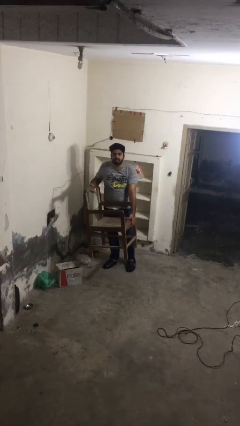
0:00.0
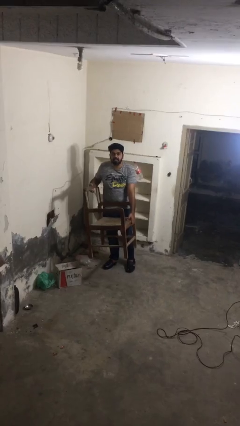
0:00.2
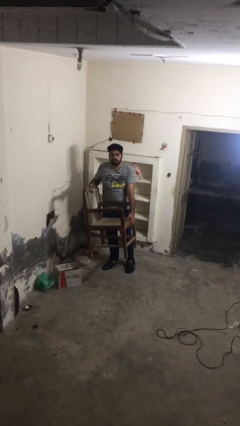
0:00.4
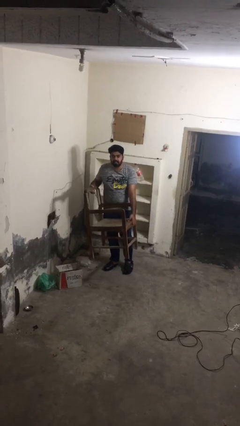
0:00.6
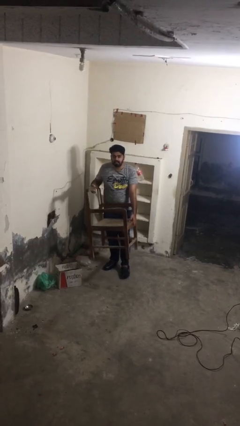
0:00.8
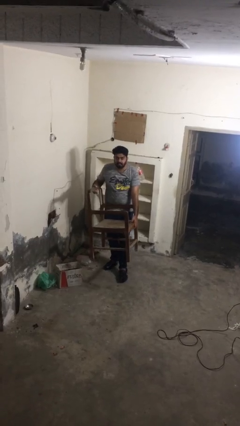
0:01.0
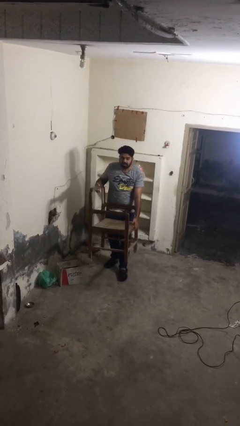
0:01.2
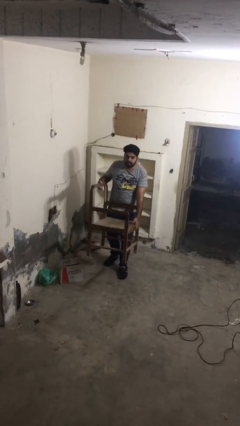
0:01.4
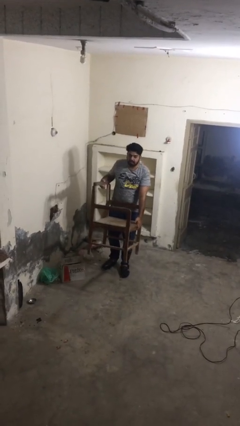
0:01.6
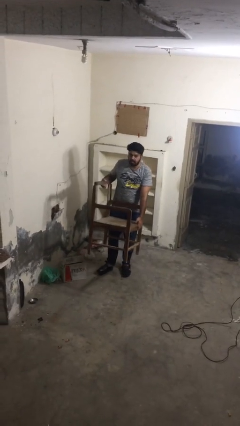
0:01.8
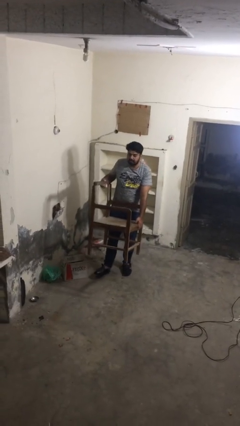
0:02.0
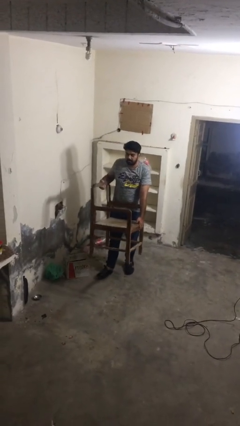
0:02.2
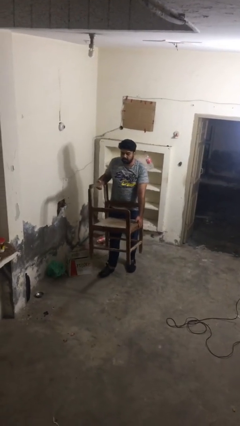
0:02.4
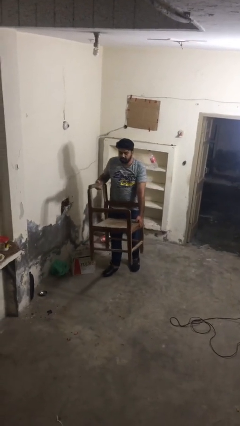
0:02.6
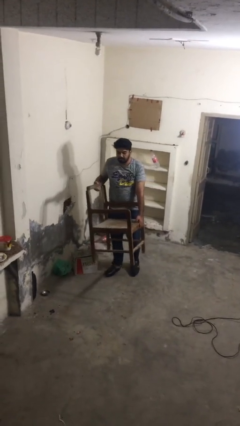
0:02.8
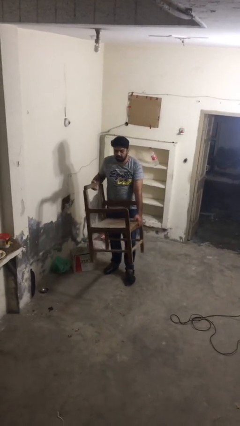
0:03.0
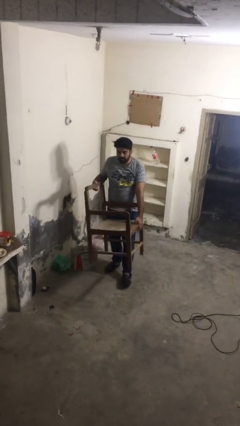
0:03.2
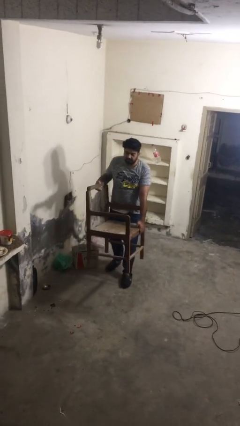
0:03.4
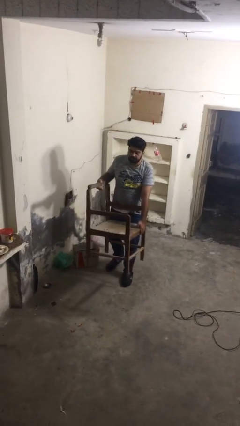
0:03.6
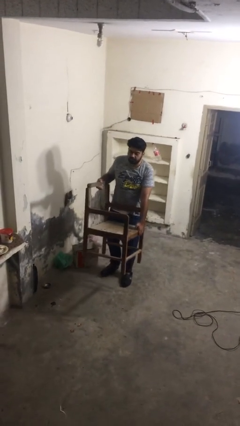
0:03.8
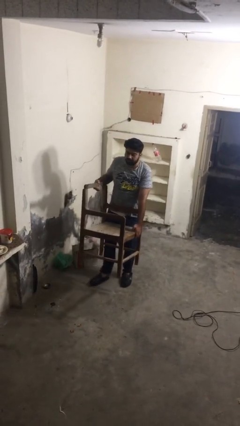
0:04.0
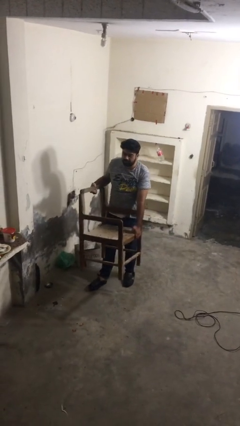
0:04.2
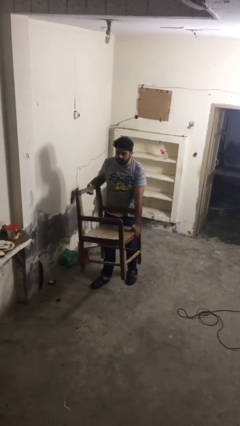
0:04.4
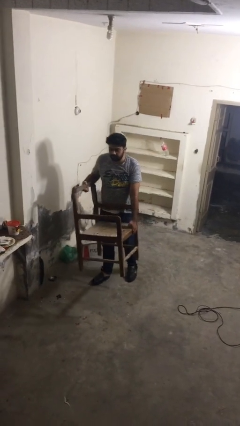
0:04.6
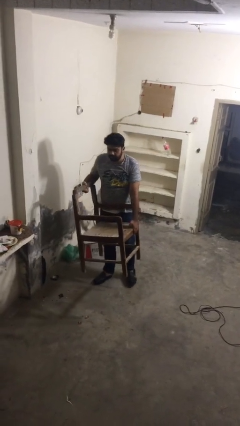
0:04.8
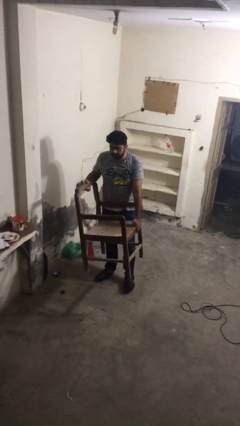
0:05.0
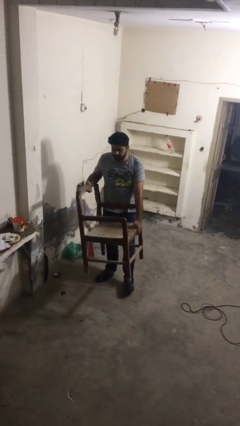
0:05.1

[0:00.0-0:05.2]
person carries heavy object

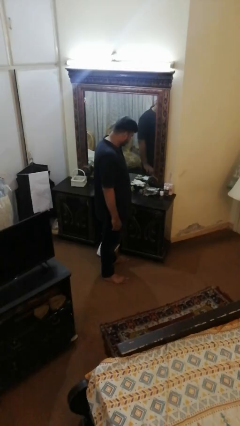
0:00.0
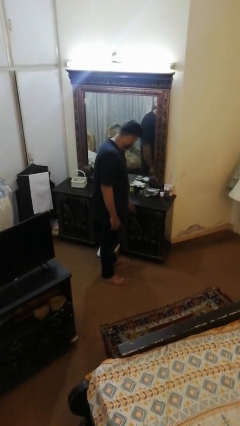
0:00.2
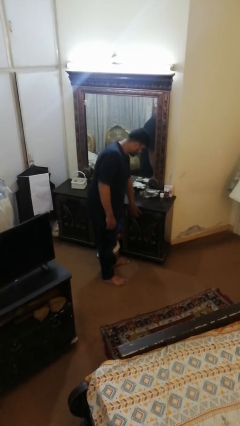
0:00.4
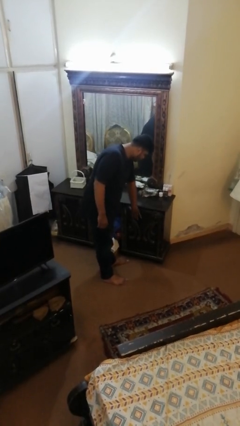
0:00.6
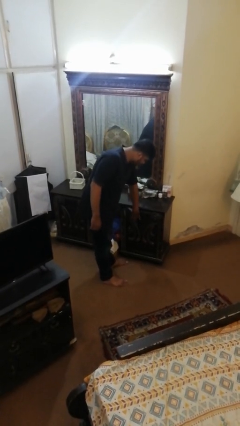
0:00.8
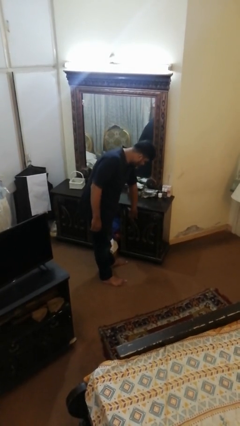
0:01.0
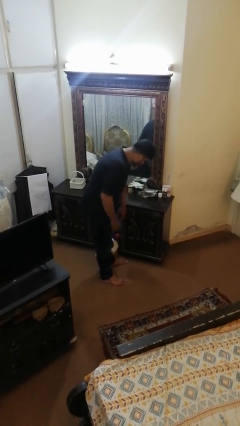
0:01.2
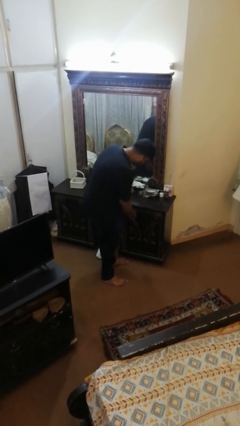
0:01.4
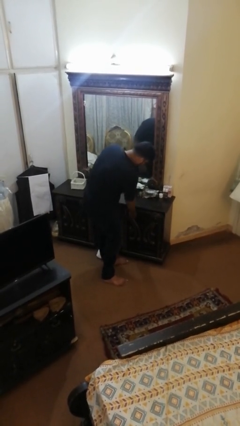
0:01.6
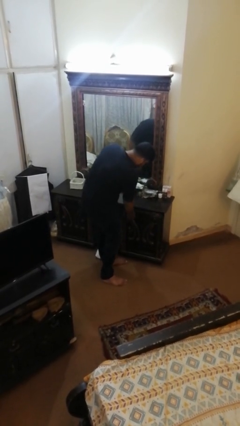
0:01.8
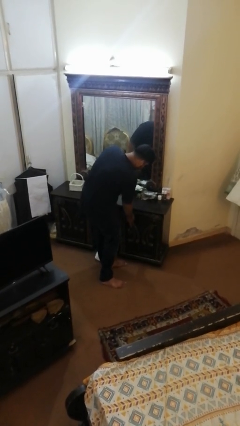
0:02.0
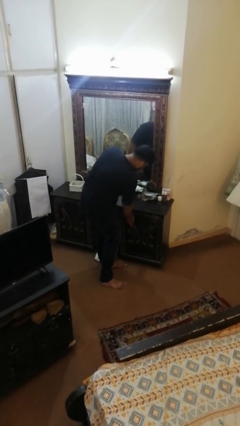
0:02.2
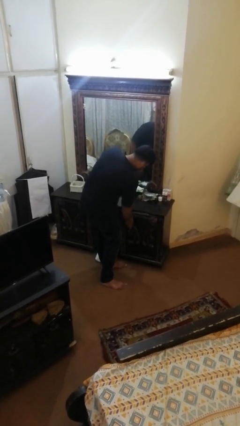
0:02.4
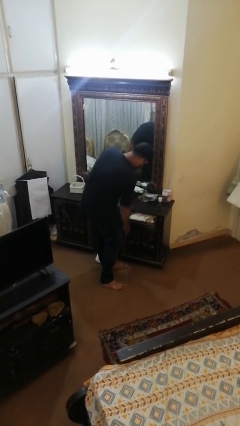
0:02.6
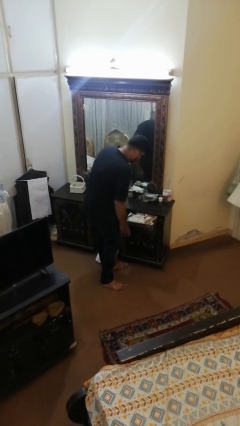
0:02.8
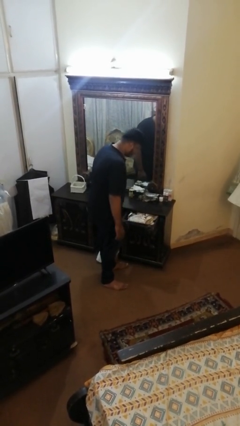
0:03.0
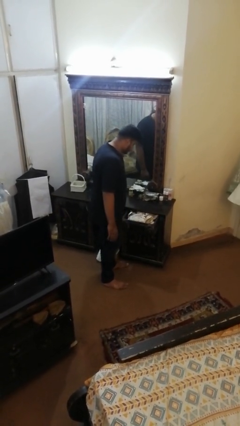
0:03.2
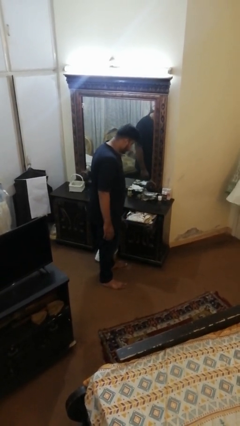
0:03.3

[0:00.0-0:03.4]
person opens dresser drawer

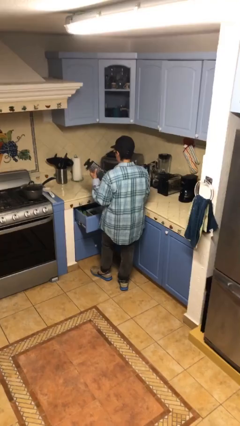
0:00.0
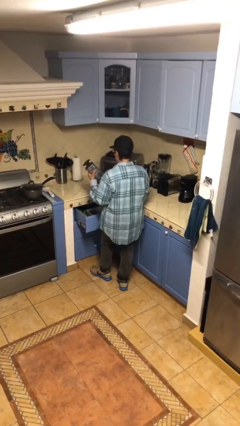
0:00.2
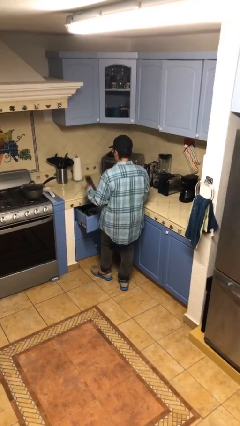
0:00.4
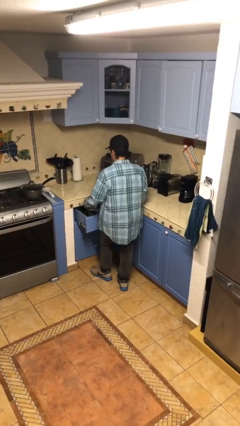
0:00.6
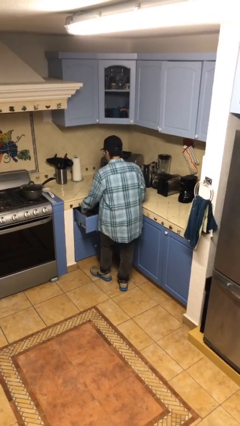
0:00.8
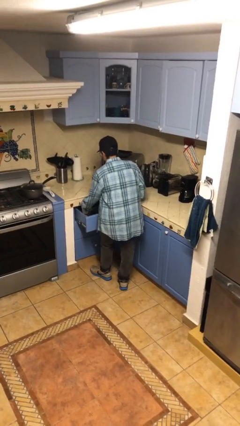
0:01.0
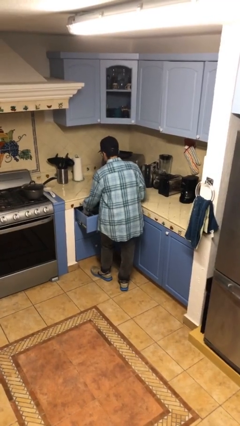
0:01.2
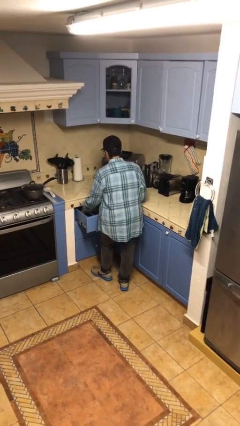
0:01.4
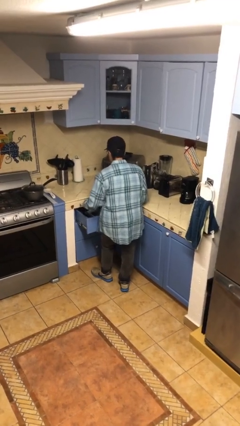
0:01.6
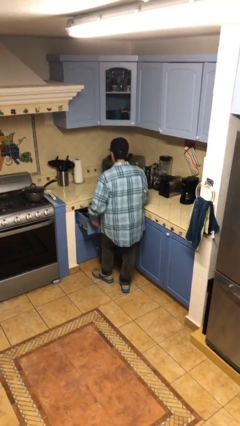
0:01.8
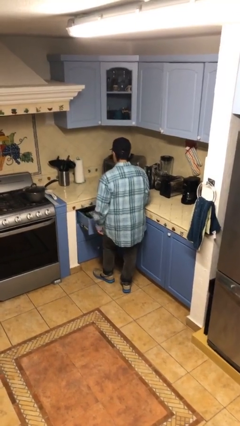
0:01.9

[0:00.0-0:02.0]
person puts object into kitchen drawer

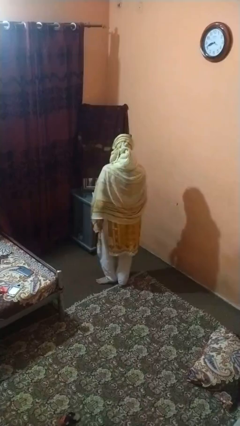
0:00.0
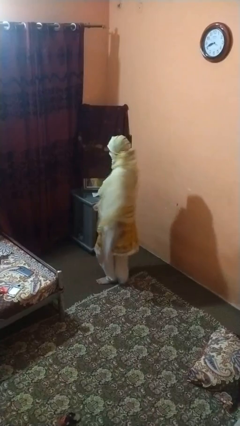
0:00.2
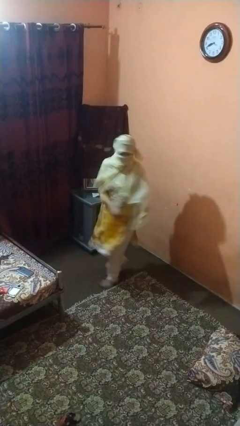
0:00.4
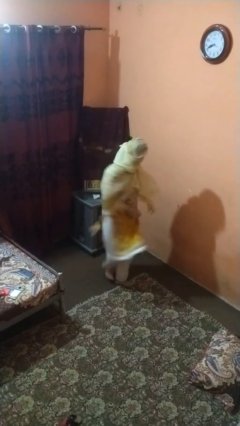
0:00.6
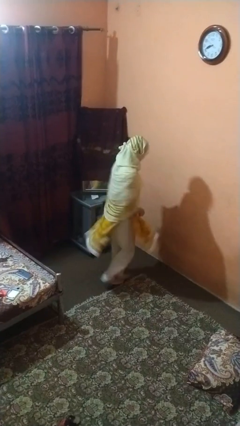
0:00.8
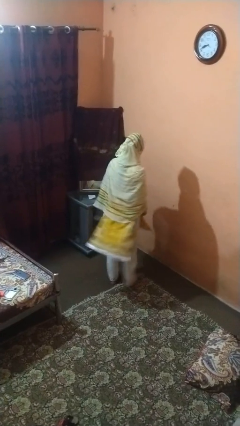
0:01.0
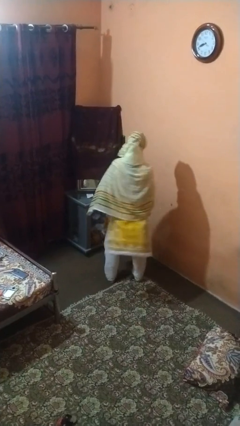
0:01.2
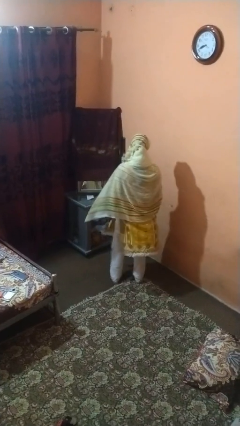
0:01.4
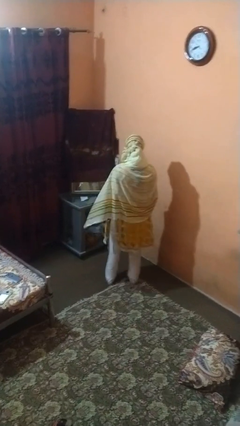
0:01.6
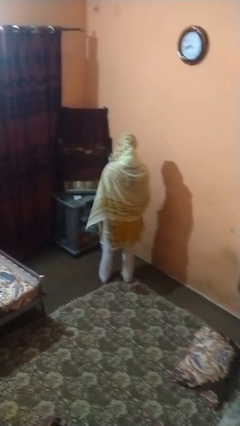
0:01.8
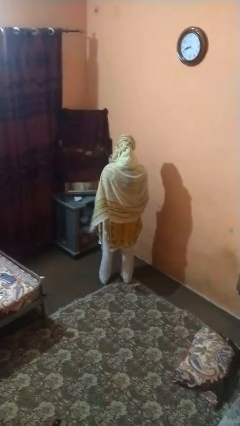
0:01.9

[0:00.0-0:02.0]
person twirls

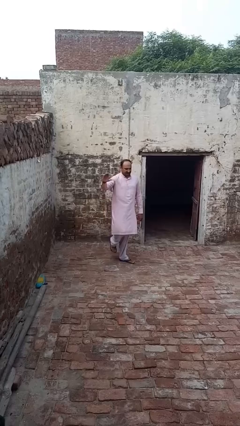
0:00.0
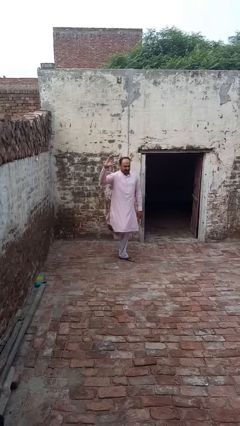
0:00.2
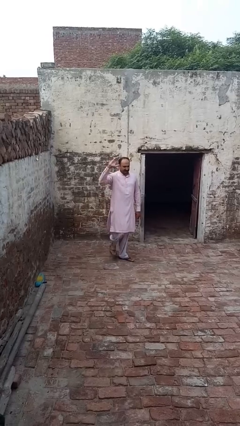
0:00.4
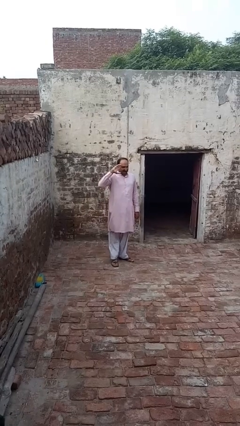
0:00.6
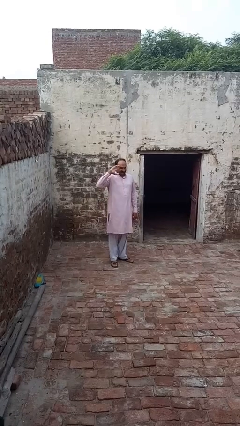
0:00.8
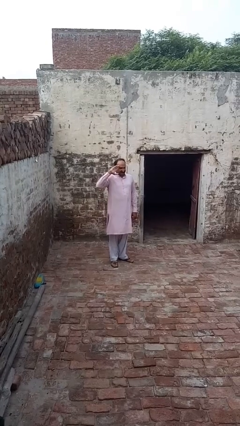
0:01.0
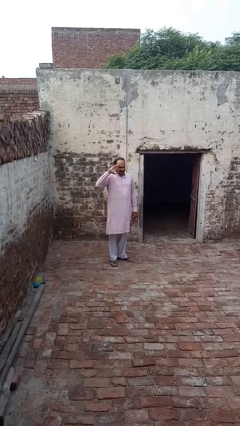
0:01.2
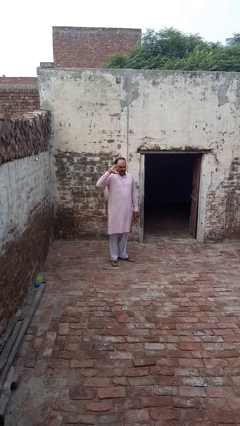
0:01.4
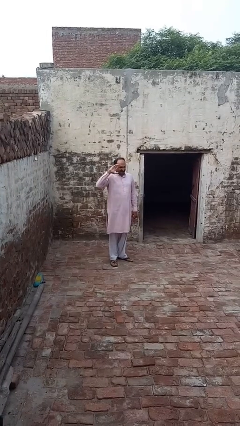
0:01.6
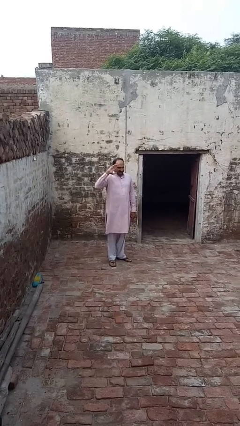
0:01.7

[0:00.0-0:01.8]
person salutes

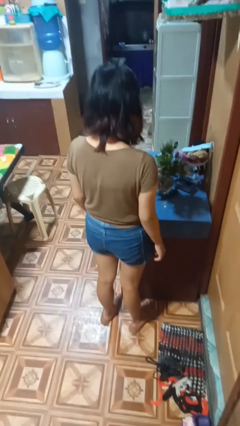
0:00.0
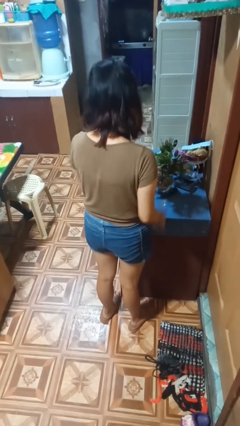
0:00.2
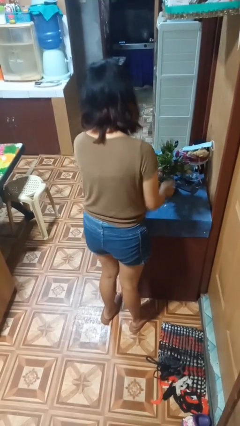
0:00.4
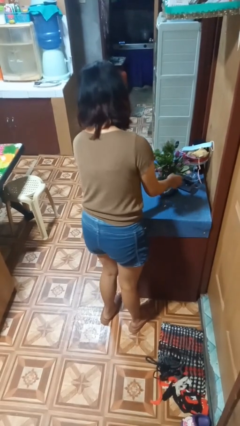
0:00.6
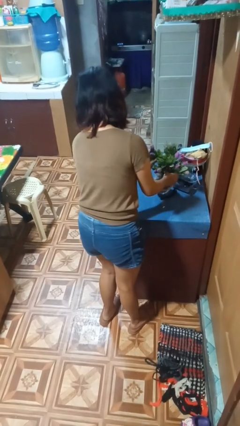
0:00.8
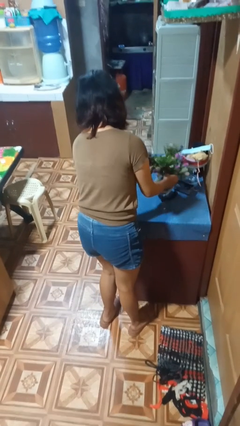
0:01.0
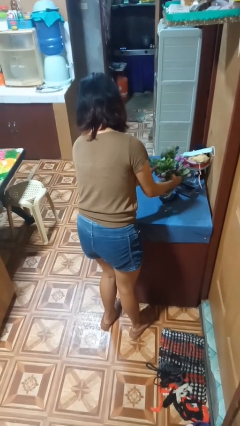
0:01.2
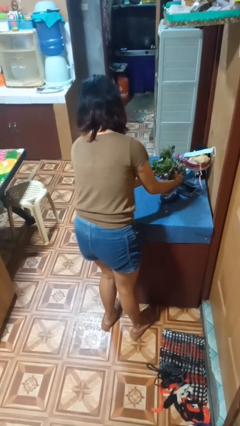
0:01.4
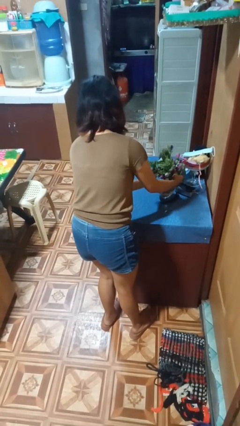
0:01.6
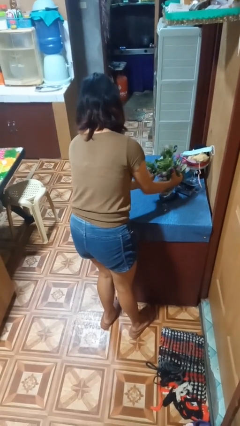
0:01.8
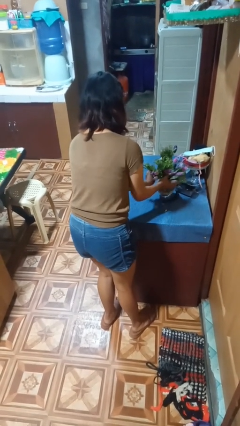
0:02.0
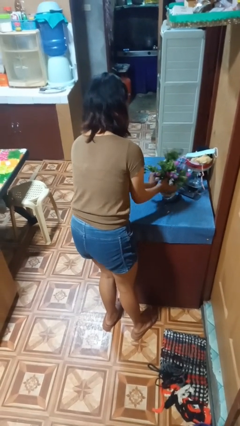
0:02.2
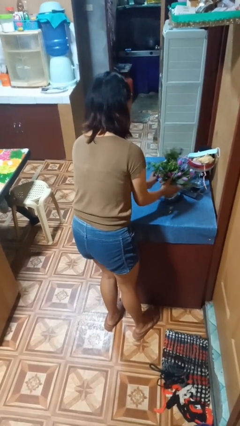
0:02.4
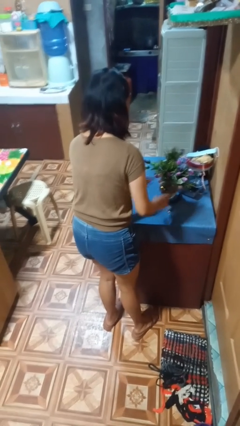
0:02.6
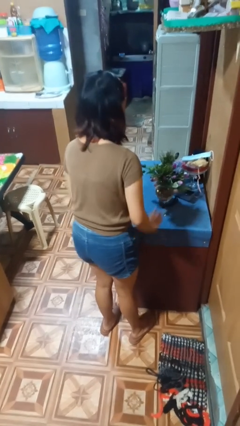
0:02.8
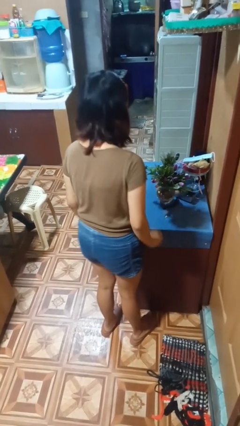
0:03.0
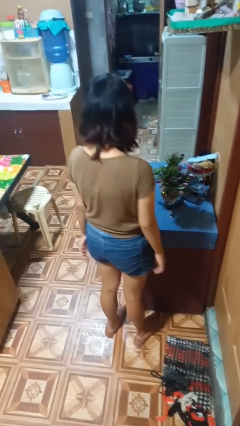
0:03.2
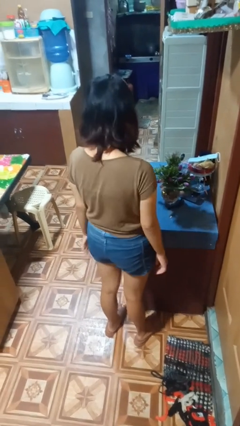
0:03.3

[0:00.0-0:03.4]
person arranges flowers in vase
